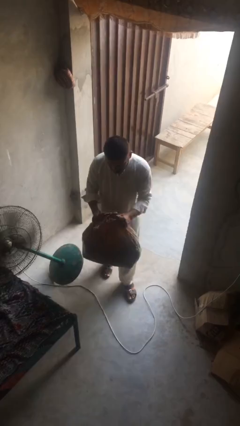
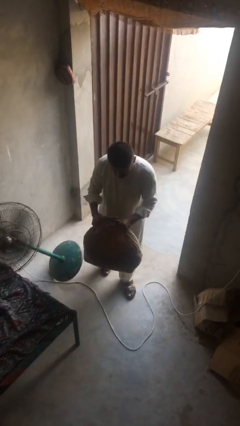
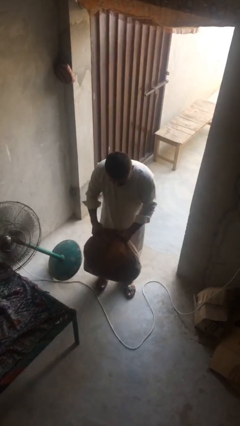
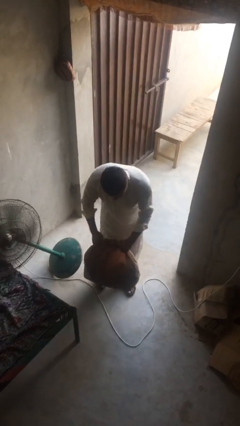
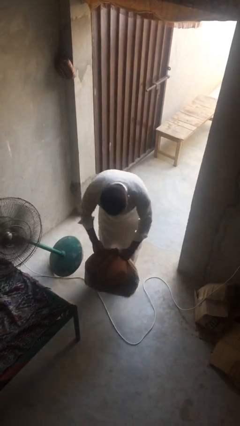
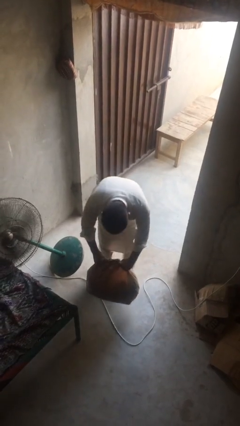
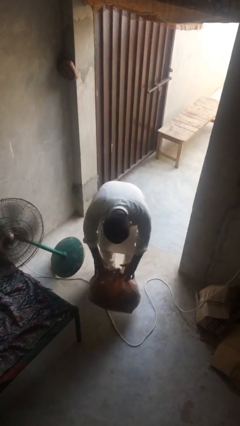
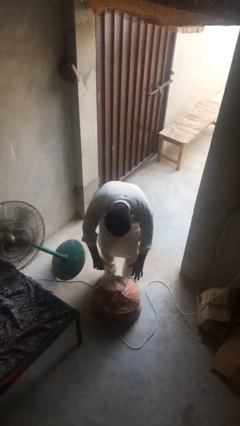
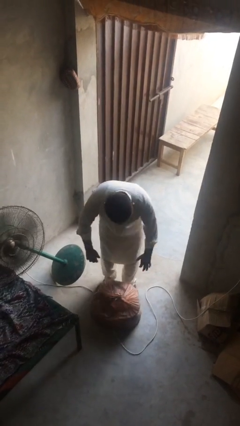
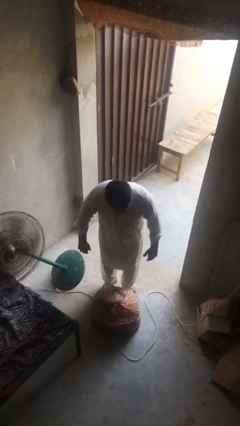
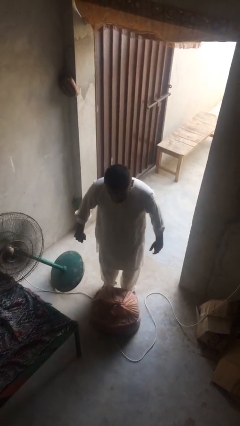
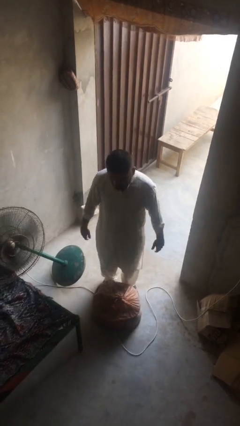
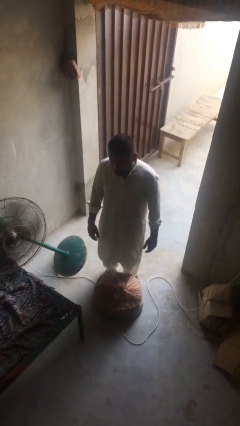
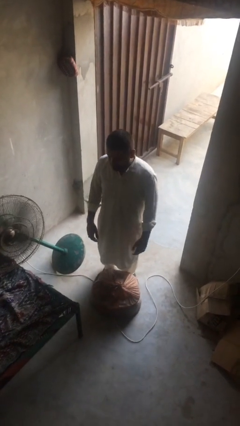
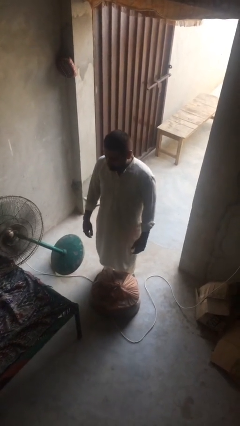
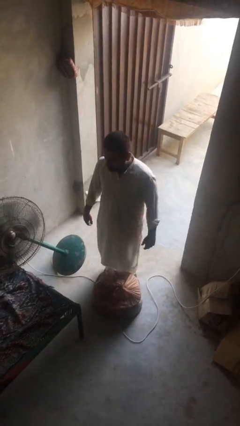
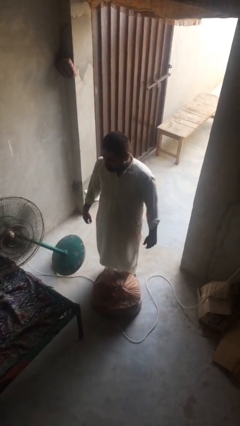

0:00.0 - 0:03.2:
person puts down object on floor

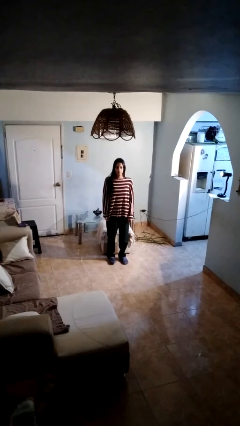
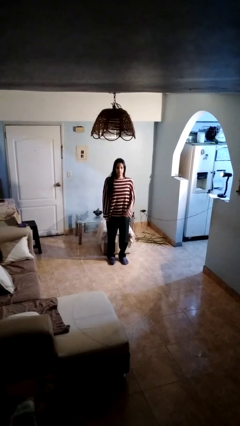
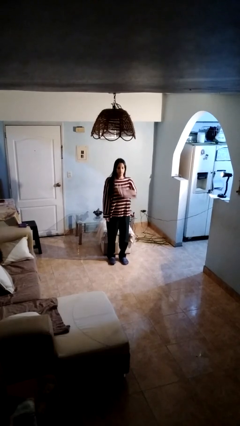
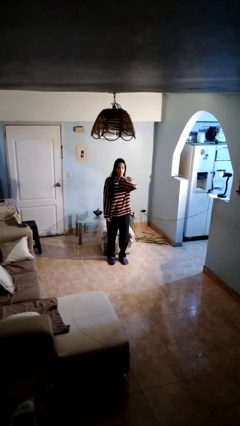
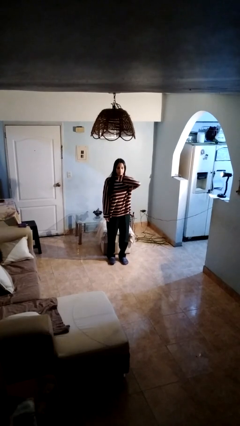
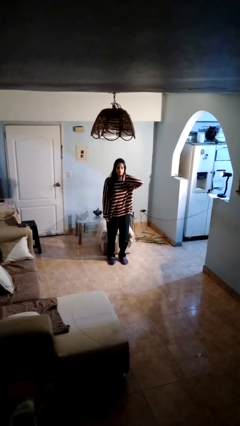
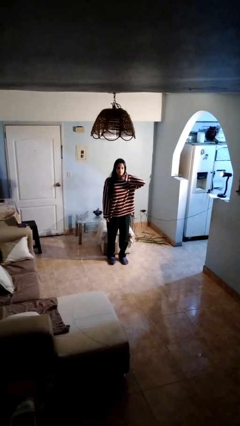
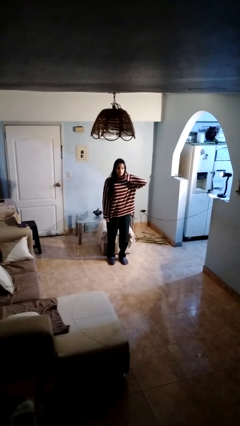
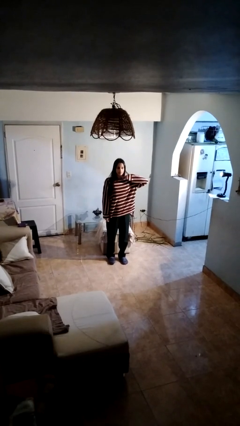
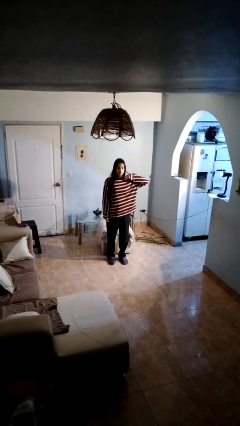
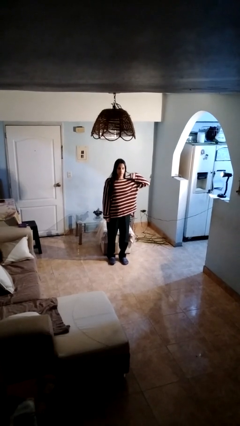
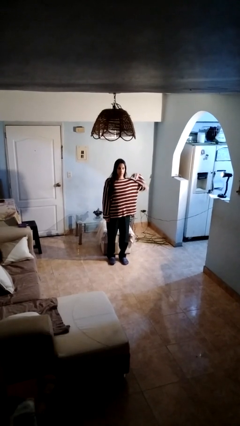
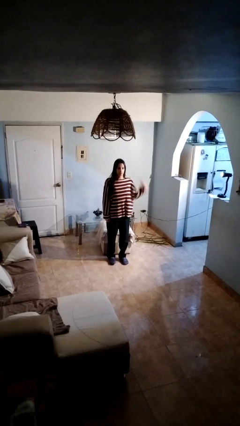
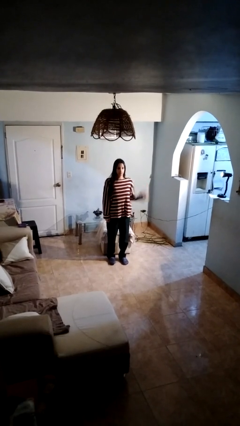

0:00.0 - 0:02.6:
person gestures cut

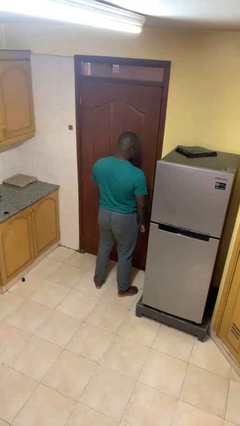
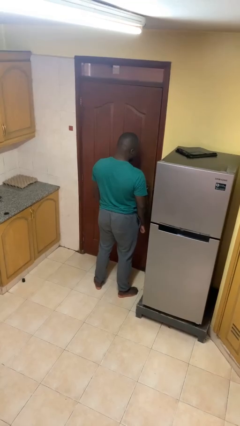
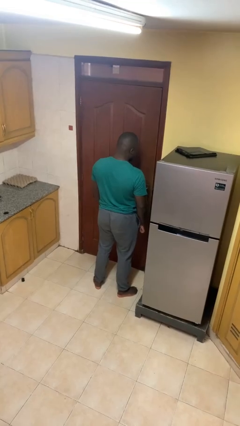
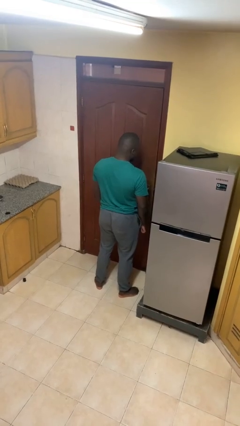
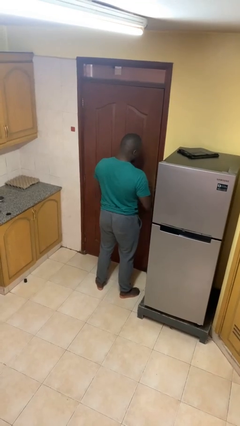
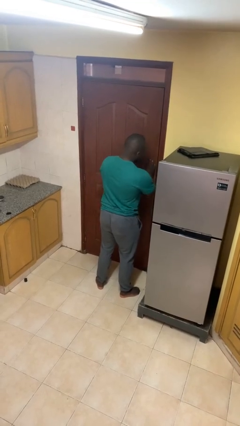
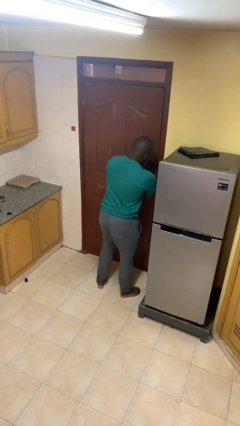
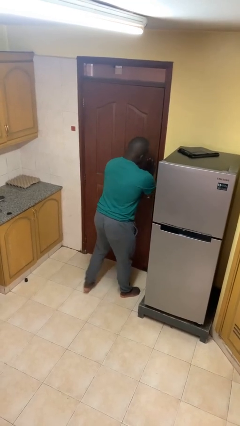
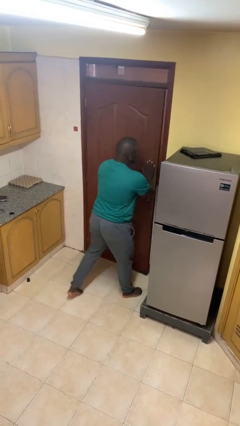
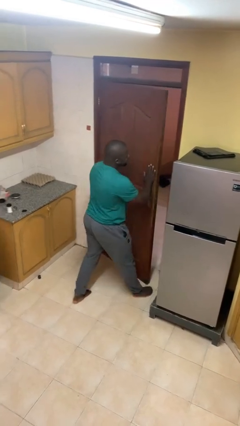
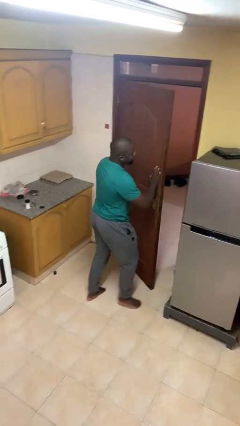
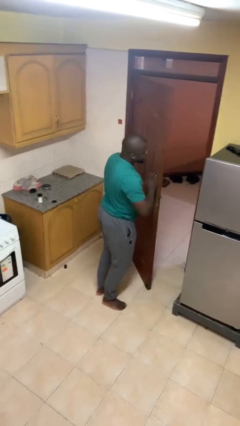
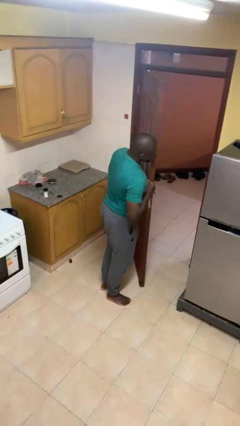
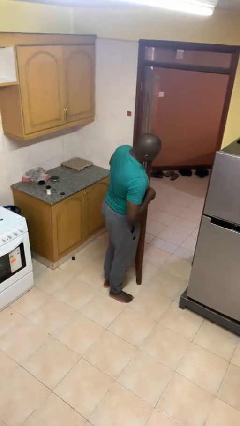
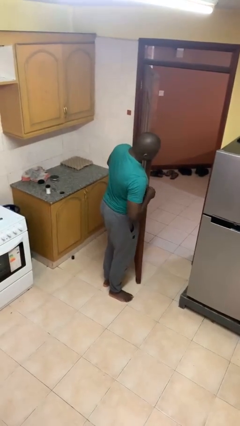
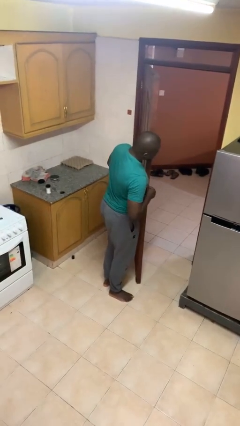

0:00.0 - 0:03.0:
person opens facility door

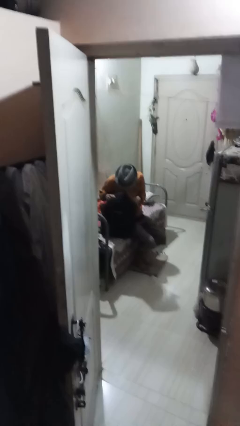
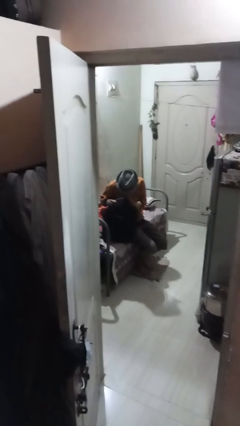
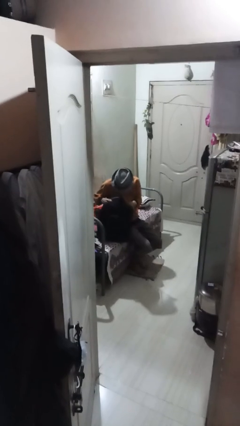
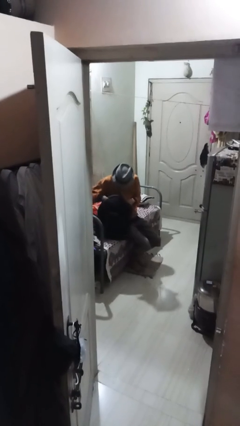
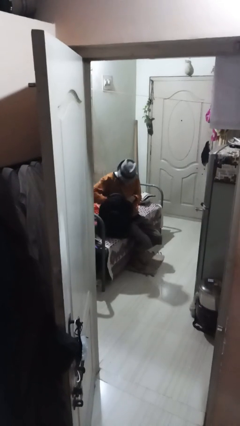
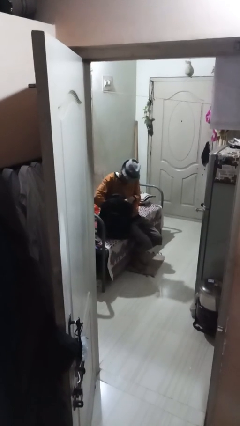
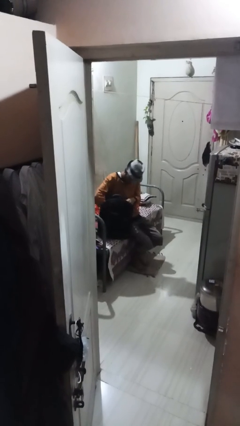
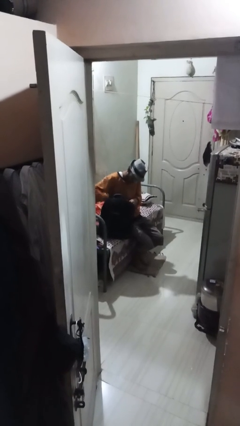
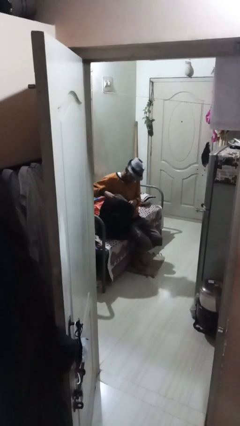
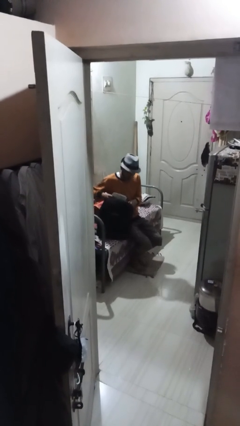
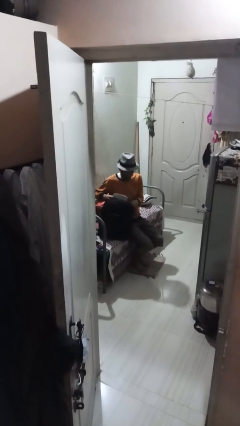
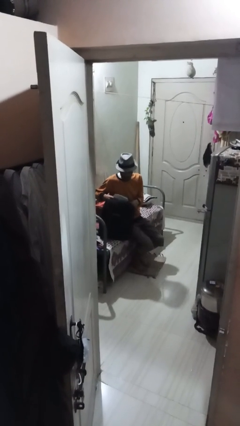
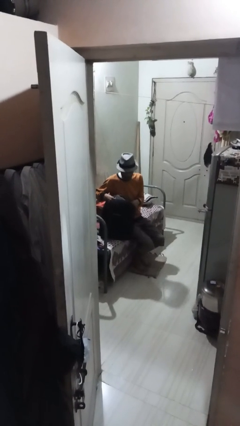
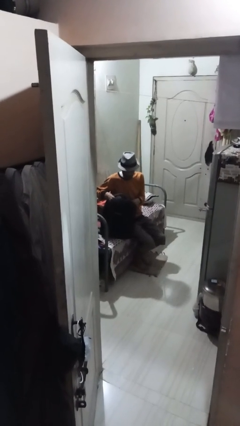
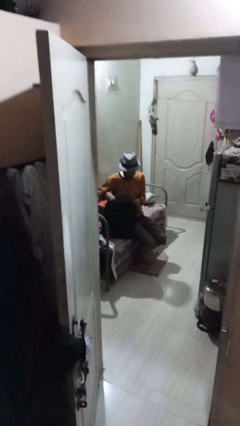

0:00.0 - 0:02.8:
person searches in backpack

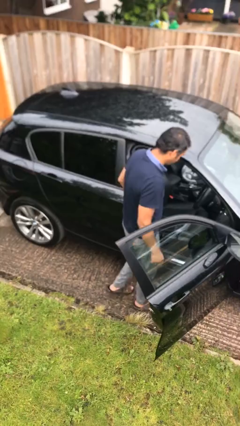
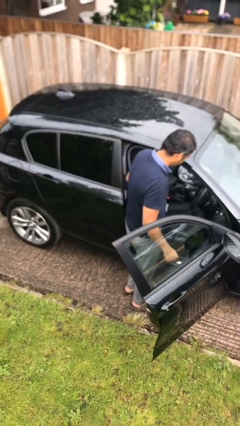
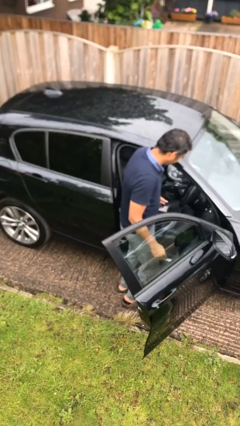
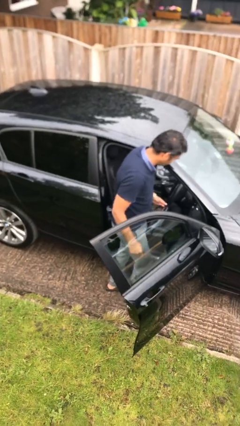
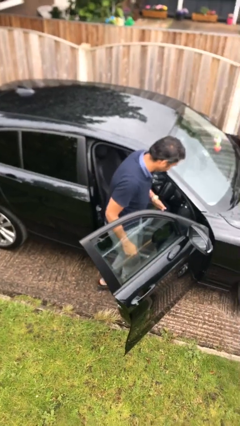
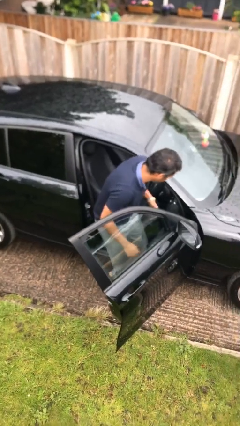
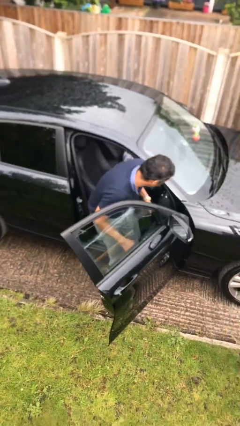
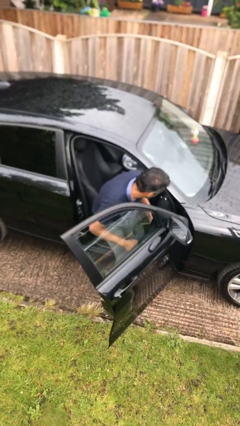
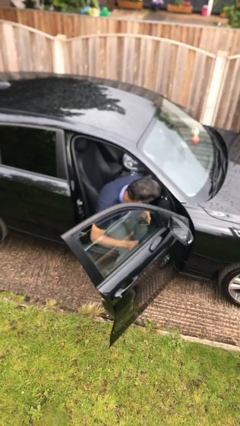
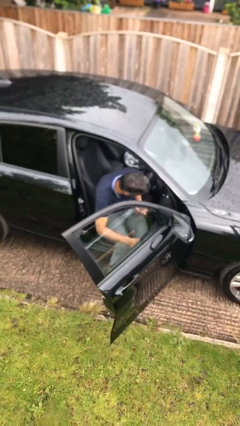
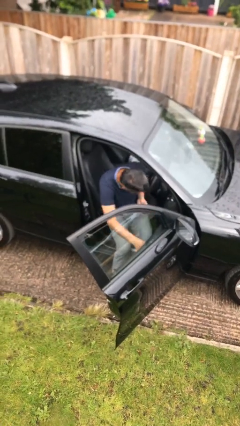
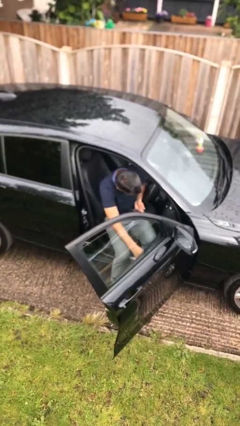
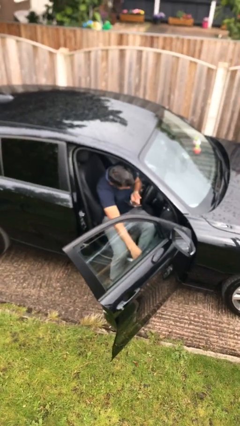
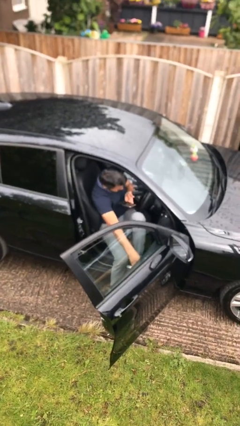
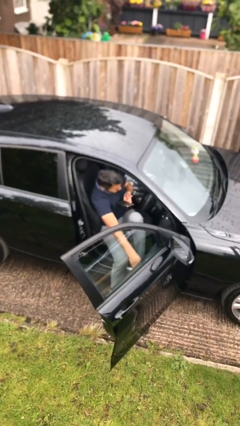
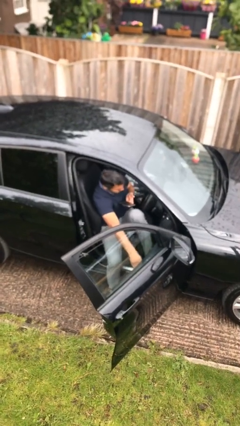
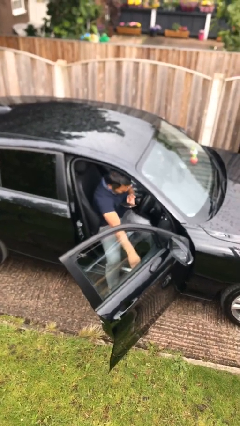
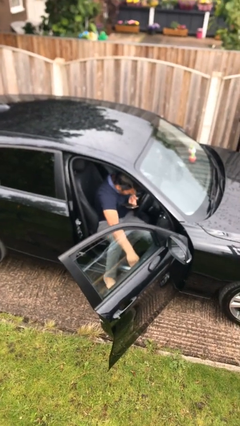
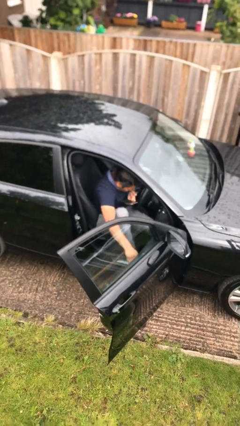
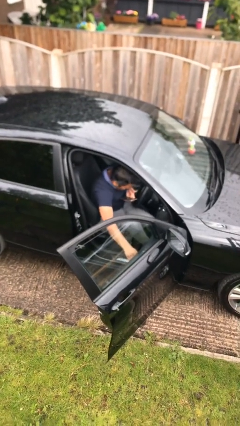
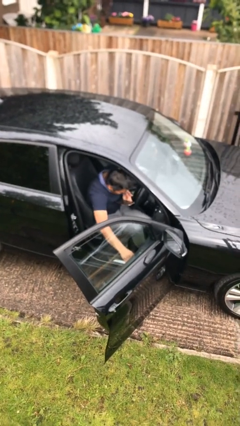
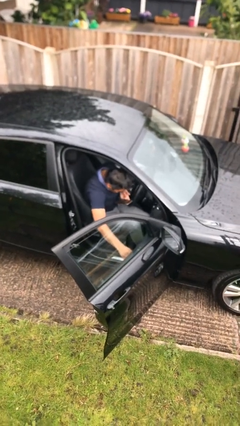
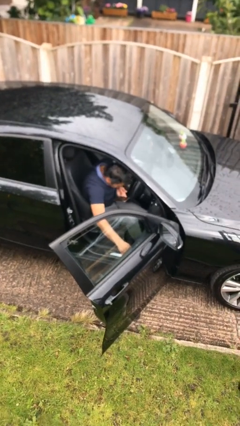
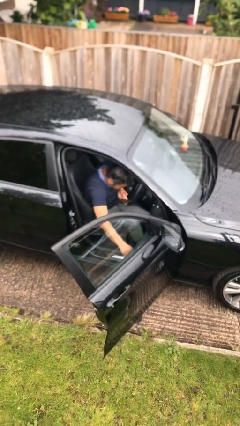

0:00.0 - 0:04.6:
person enters car

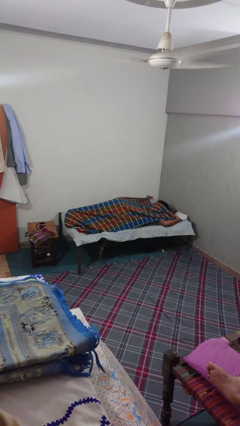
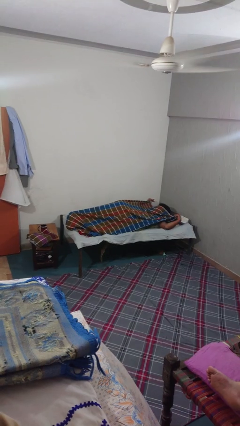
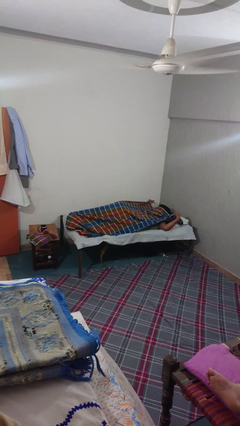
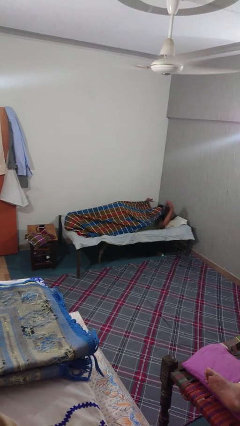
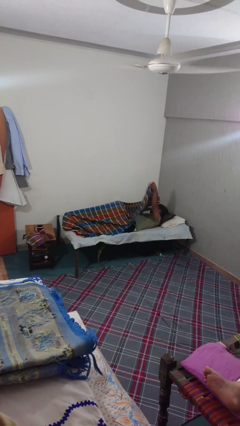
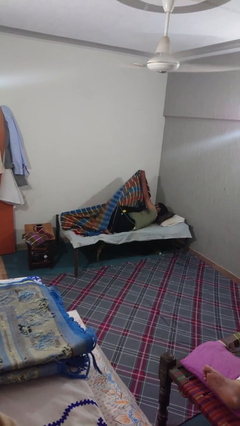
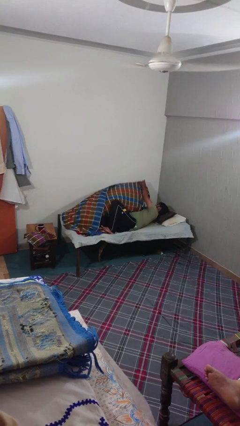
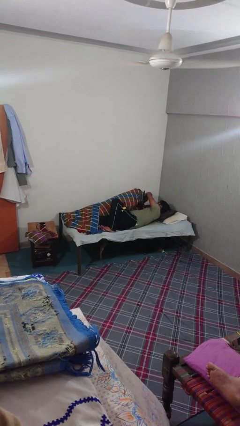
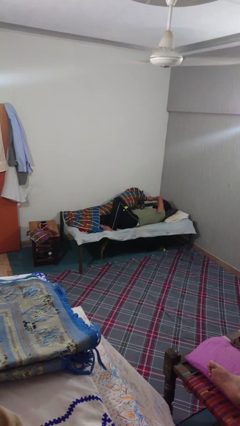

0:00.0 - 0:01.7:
person uncovers with bedsheets
